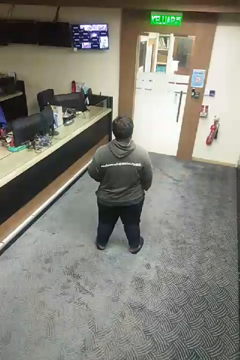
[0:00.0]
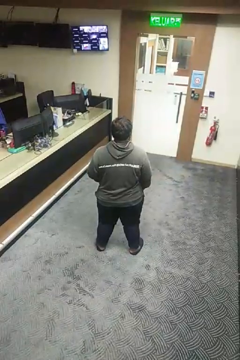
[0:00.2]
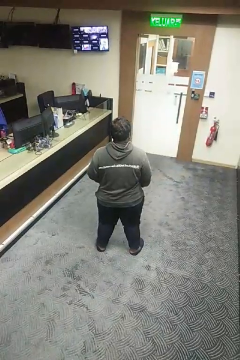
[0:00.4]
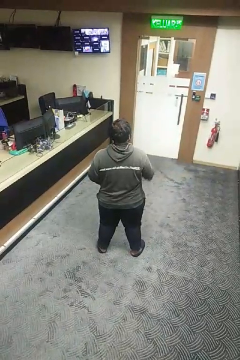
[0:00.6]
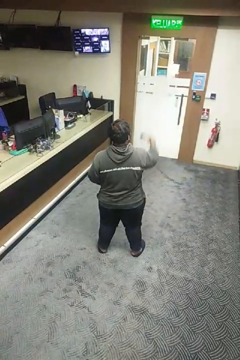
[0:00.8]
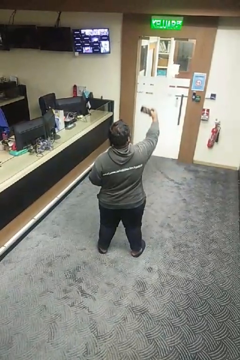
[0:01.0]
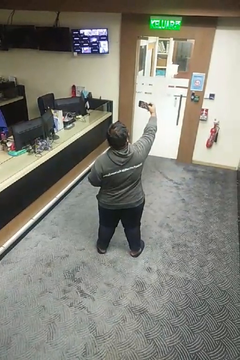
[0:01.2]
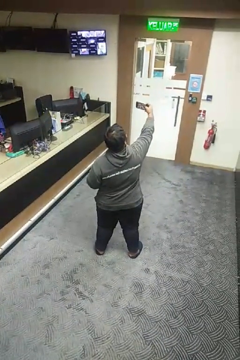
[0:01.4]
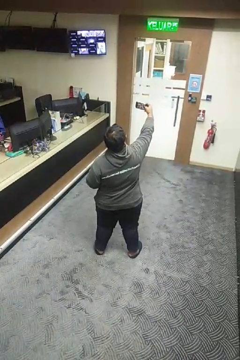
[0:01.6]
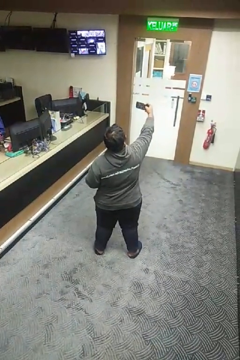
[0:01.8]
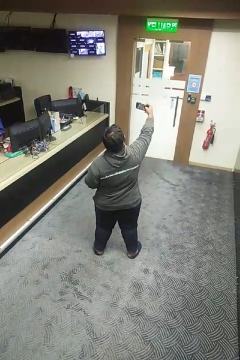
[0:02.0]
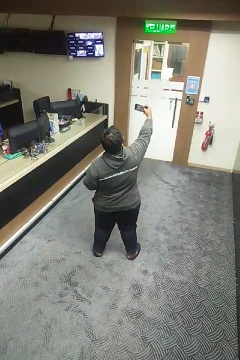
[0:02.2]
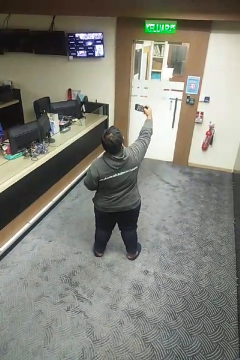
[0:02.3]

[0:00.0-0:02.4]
person takes selfie

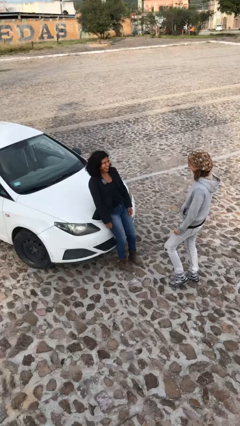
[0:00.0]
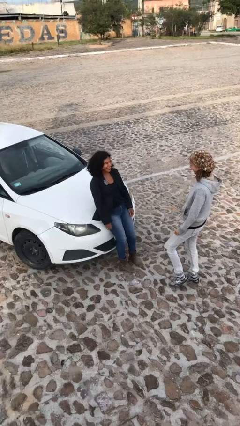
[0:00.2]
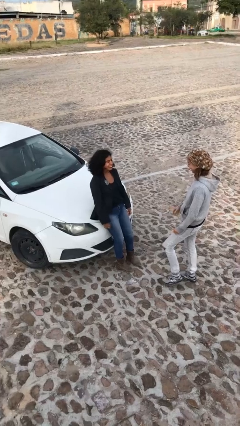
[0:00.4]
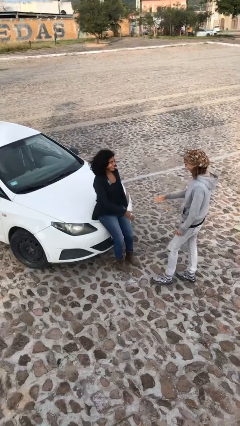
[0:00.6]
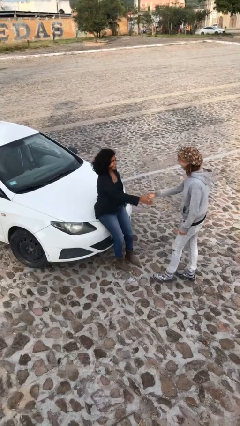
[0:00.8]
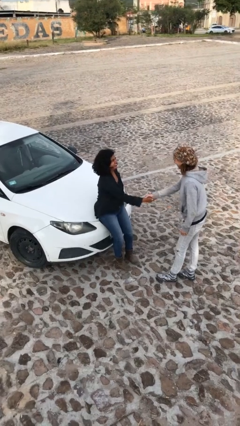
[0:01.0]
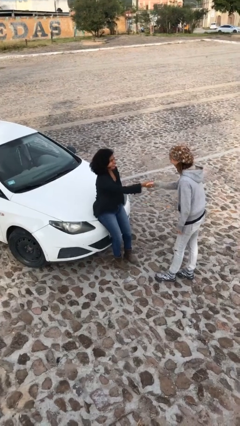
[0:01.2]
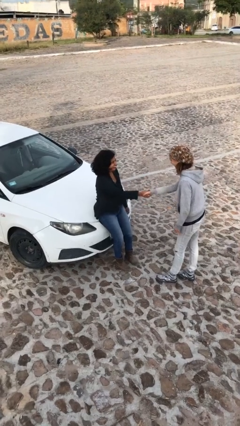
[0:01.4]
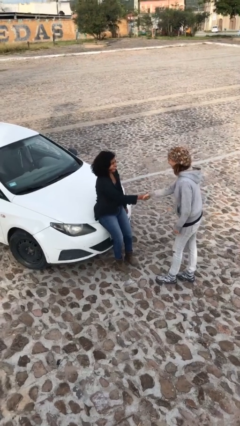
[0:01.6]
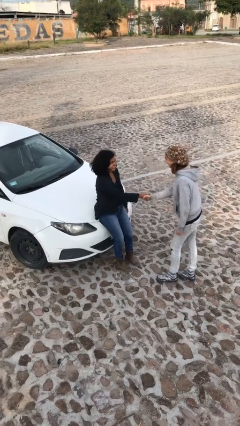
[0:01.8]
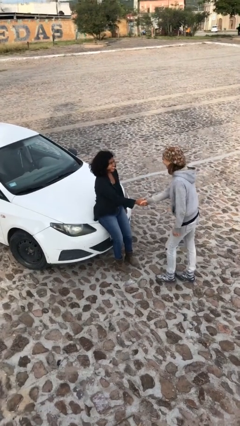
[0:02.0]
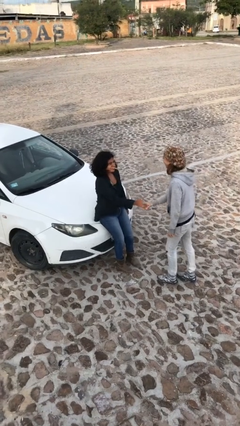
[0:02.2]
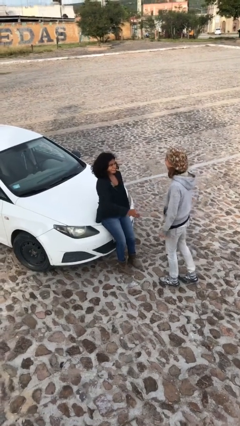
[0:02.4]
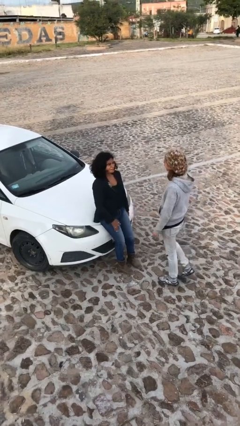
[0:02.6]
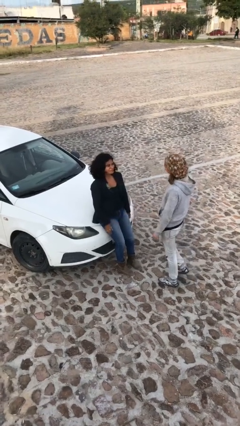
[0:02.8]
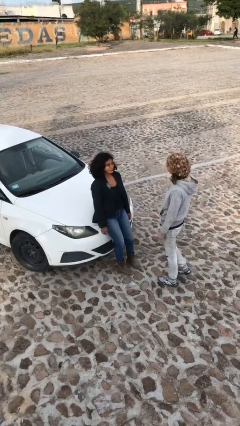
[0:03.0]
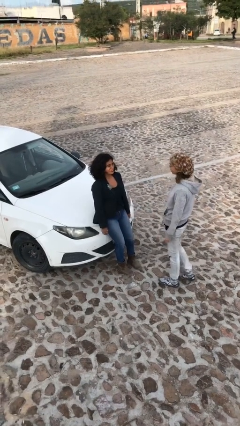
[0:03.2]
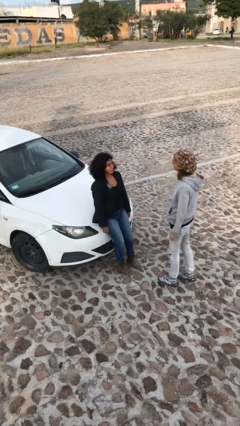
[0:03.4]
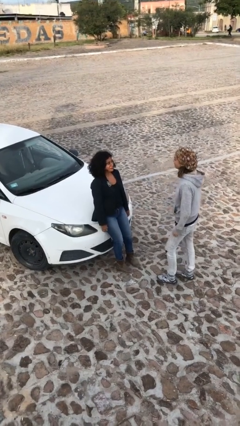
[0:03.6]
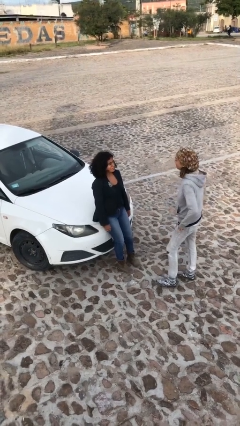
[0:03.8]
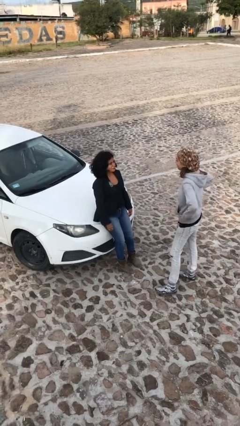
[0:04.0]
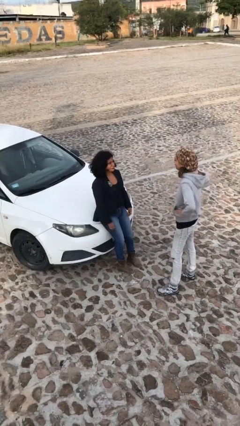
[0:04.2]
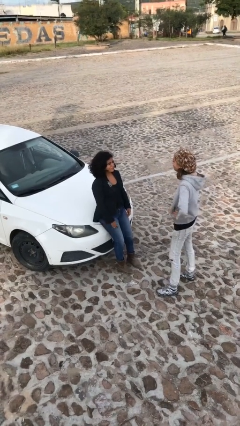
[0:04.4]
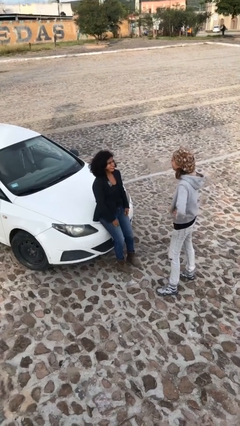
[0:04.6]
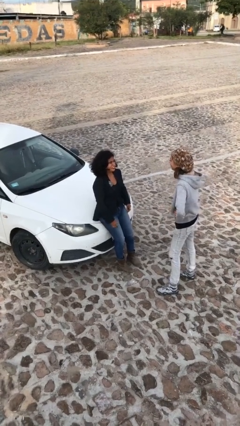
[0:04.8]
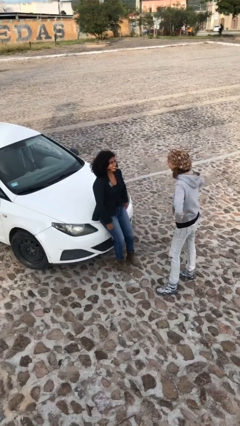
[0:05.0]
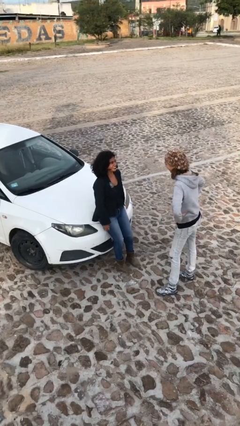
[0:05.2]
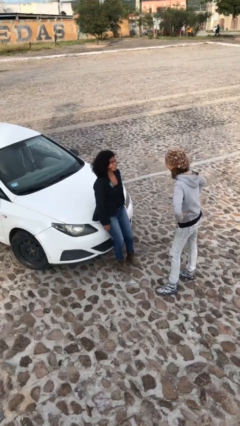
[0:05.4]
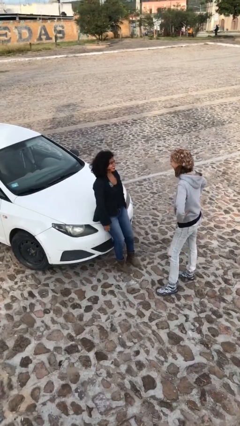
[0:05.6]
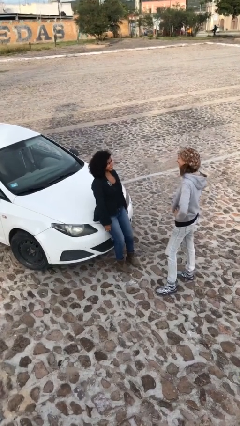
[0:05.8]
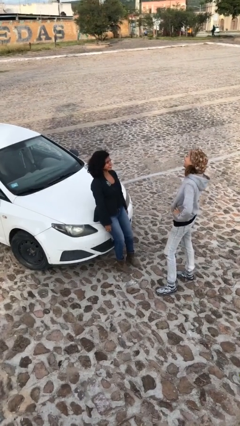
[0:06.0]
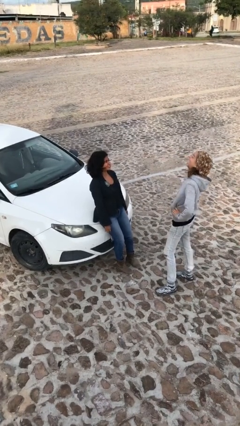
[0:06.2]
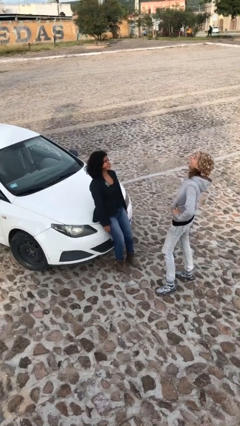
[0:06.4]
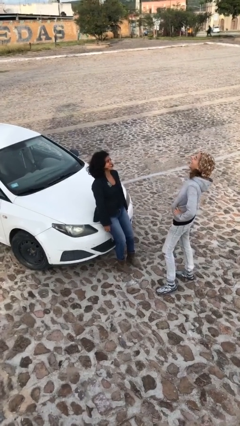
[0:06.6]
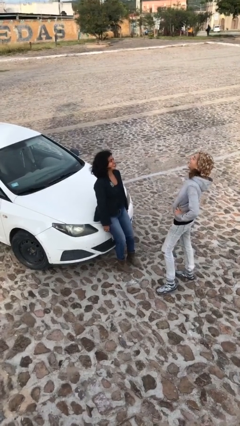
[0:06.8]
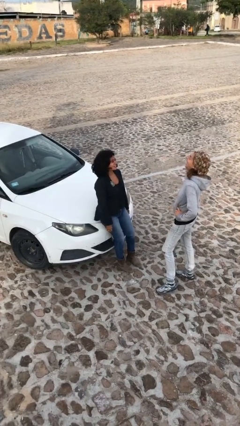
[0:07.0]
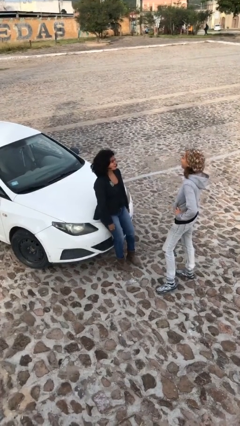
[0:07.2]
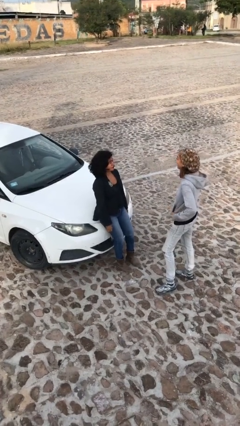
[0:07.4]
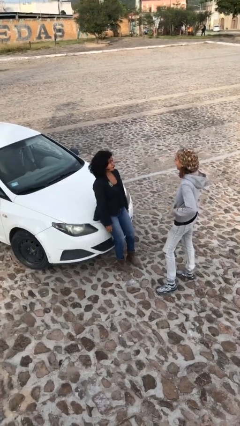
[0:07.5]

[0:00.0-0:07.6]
person shakes hand

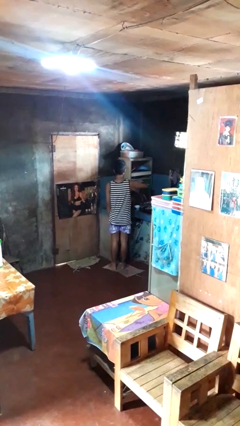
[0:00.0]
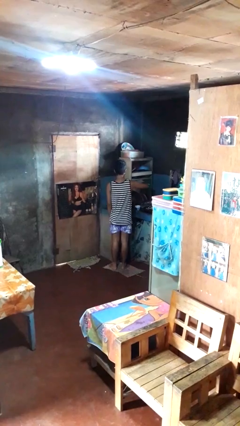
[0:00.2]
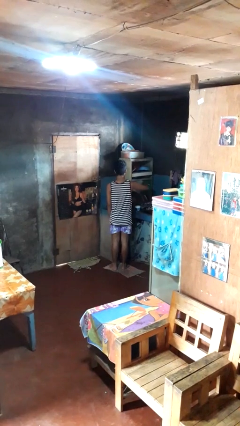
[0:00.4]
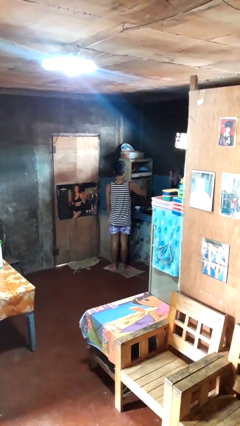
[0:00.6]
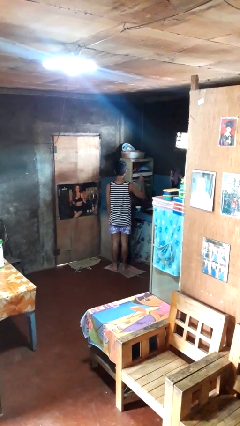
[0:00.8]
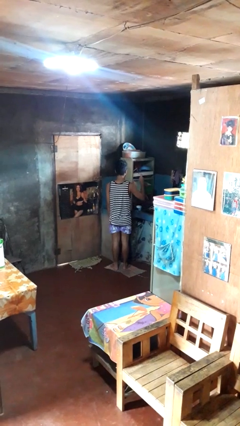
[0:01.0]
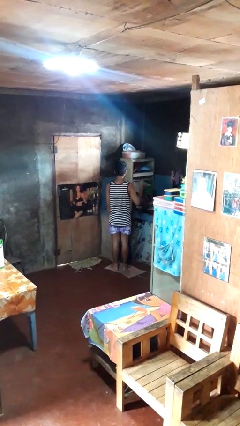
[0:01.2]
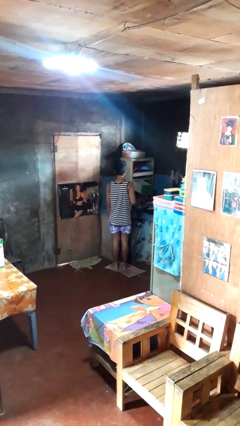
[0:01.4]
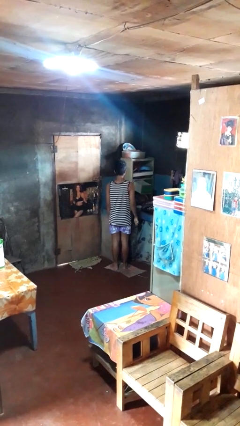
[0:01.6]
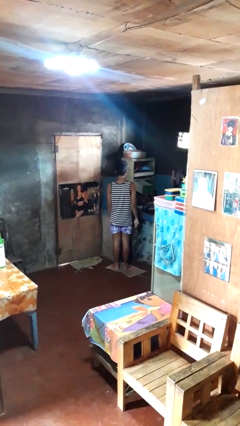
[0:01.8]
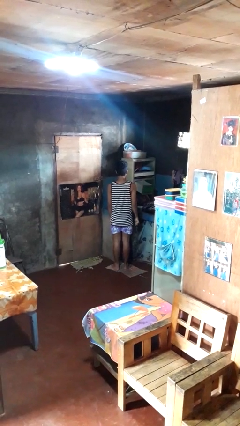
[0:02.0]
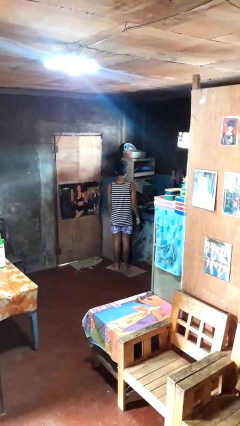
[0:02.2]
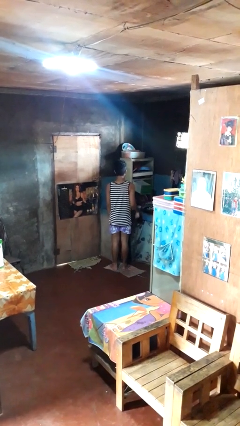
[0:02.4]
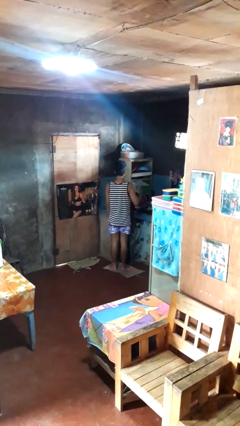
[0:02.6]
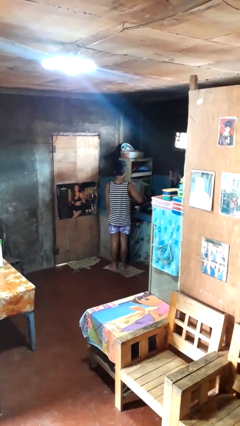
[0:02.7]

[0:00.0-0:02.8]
person takes object from kitchen drawer

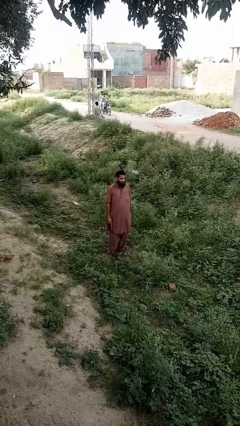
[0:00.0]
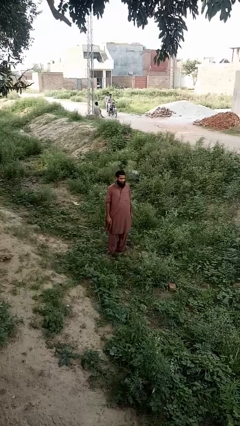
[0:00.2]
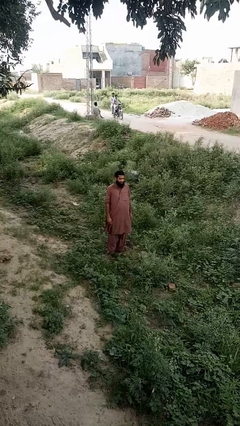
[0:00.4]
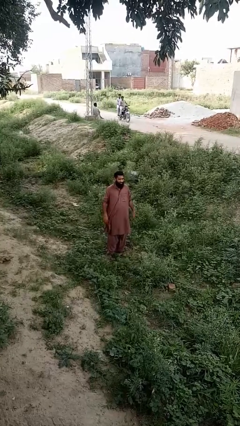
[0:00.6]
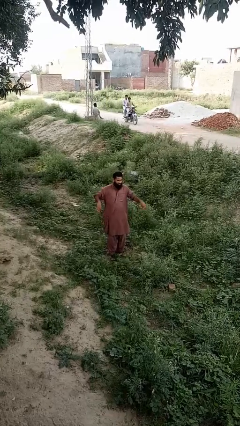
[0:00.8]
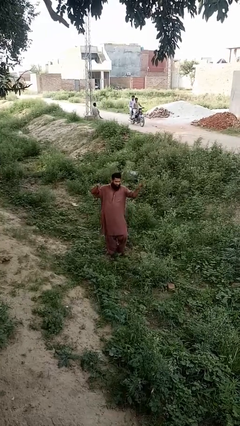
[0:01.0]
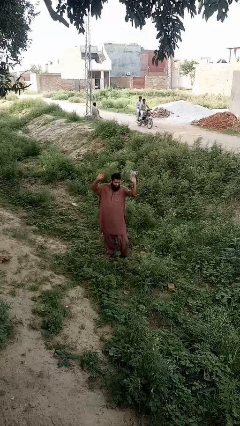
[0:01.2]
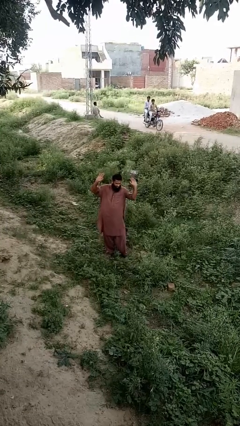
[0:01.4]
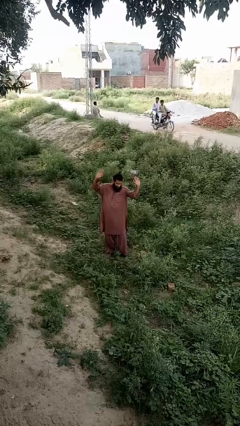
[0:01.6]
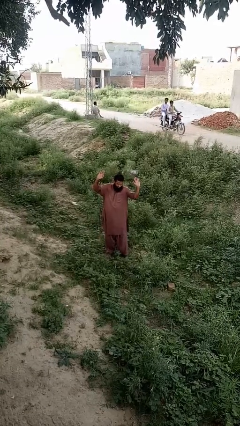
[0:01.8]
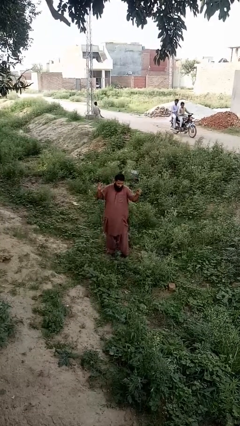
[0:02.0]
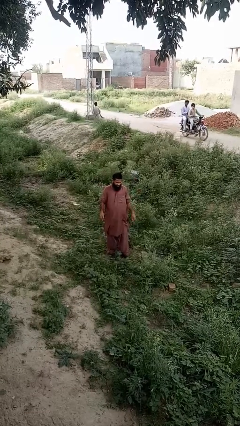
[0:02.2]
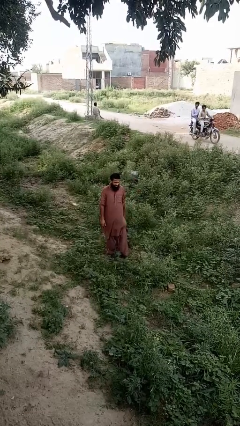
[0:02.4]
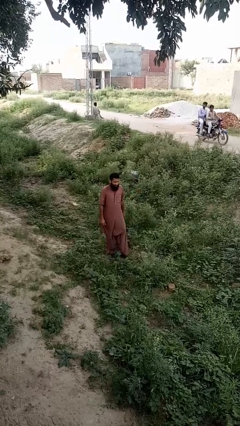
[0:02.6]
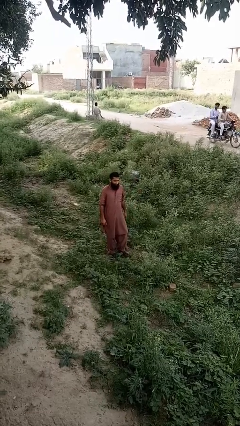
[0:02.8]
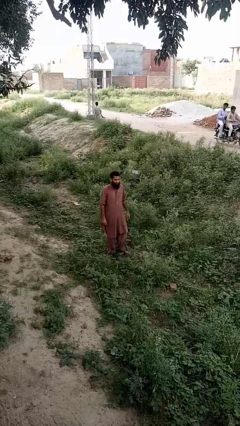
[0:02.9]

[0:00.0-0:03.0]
person dances in place

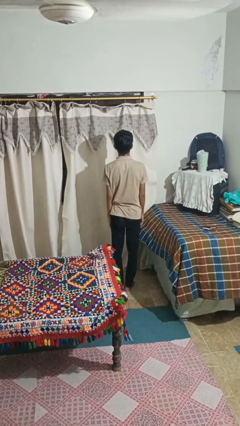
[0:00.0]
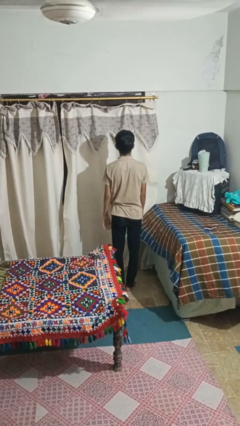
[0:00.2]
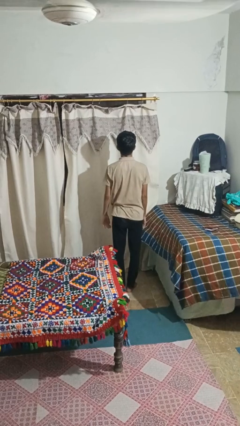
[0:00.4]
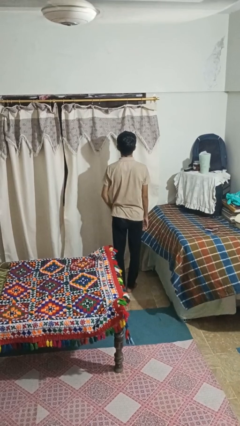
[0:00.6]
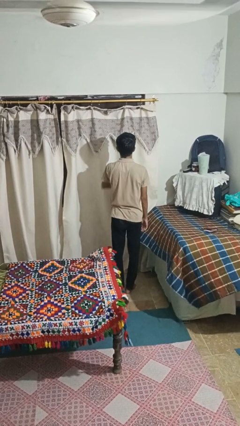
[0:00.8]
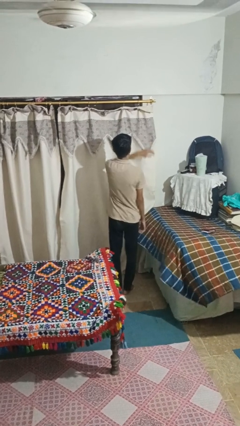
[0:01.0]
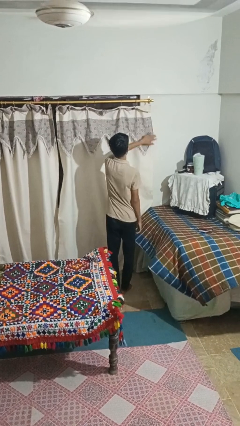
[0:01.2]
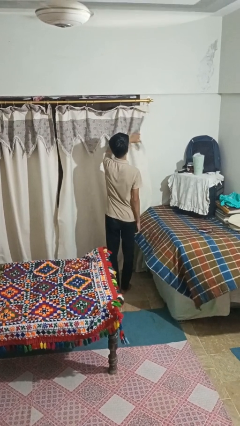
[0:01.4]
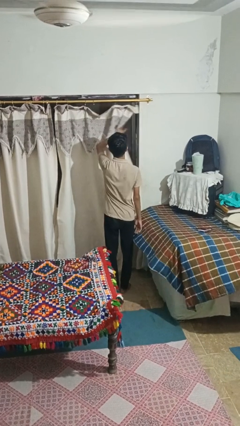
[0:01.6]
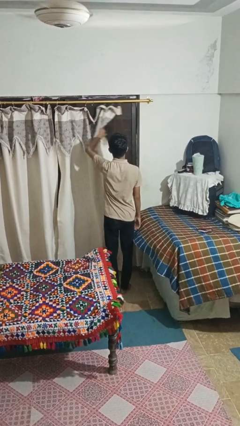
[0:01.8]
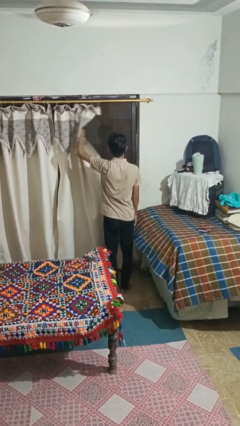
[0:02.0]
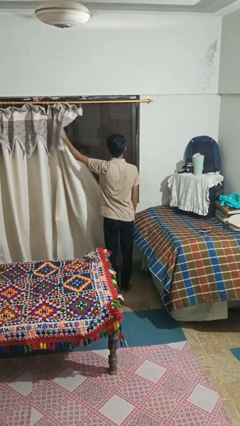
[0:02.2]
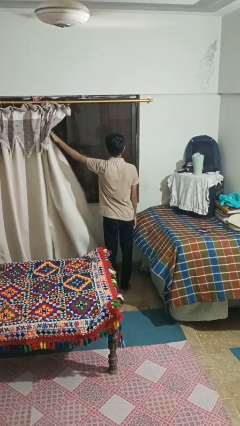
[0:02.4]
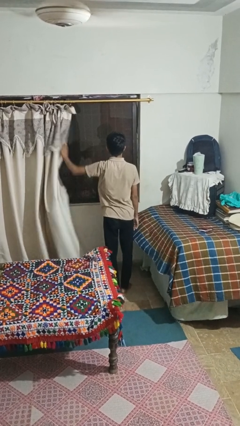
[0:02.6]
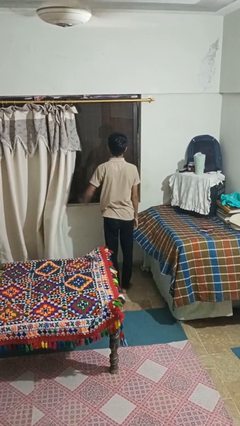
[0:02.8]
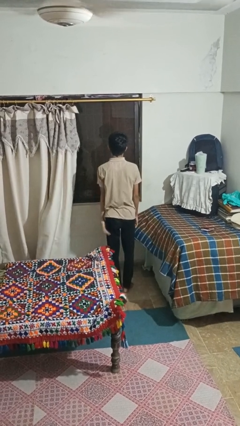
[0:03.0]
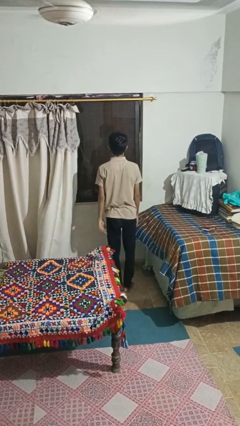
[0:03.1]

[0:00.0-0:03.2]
person opens curtains
